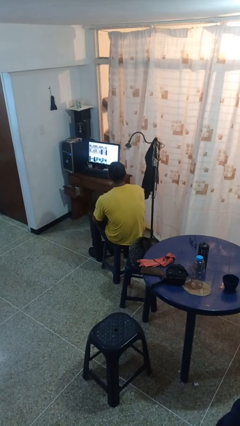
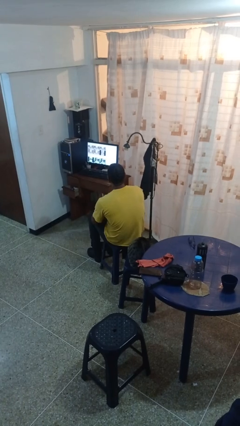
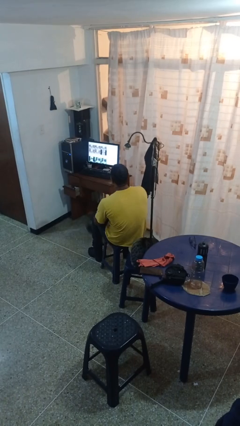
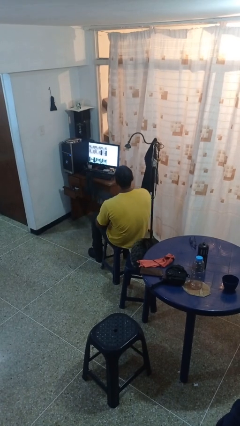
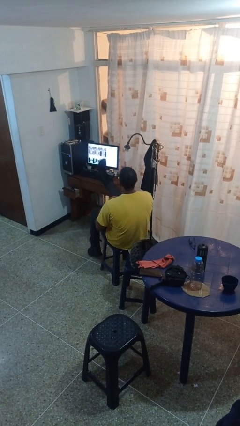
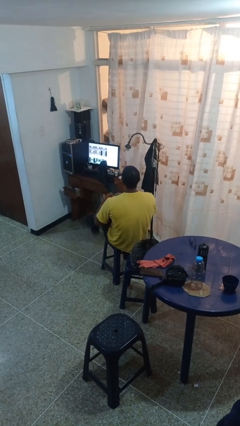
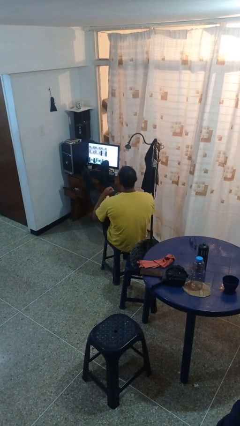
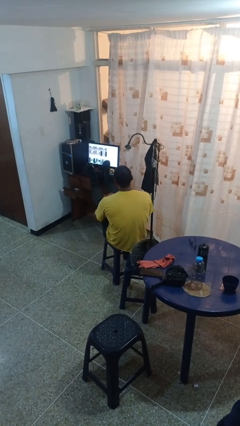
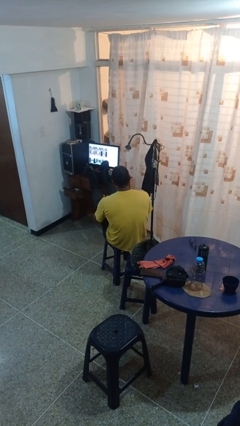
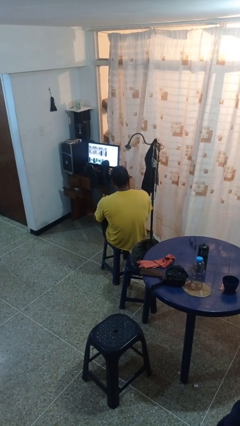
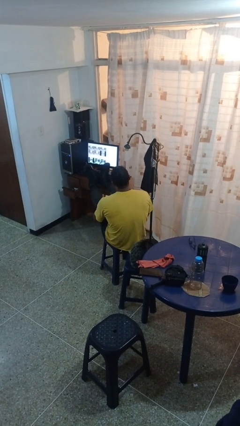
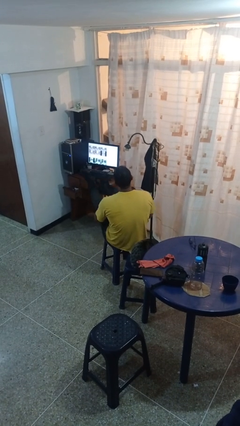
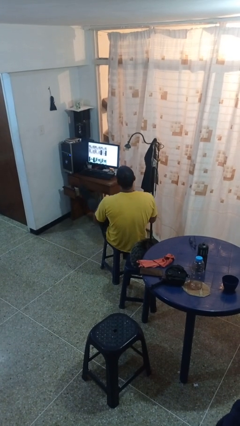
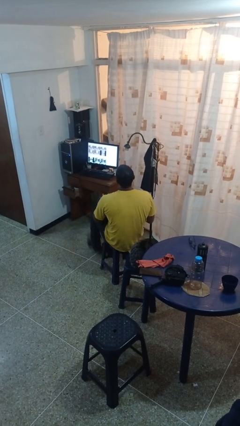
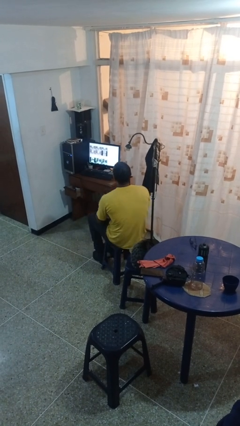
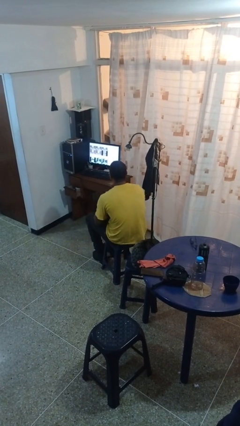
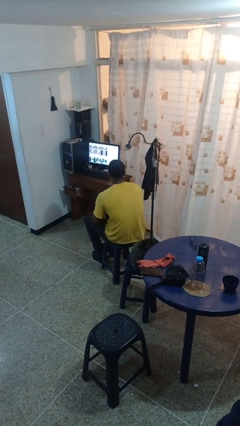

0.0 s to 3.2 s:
person puts feet up

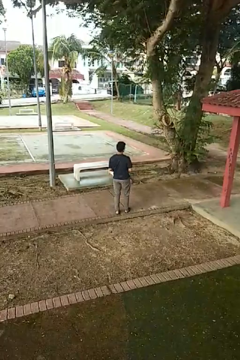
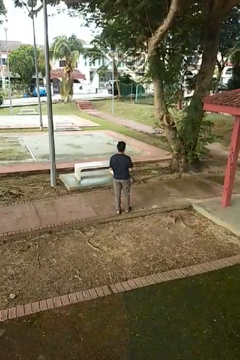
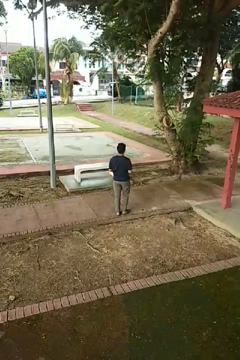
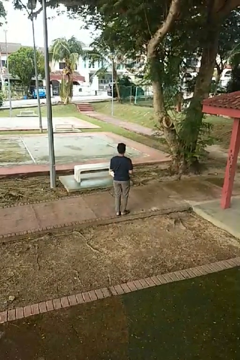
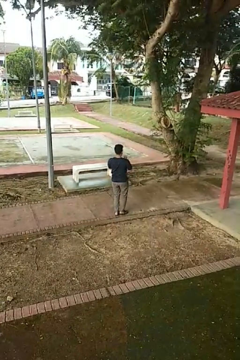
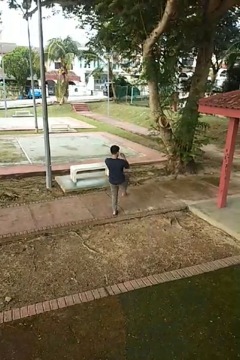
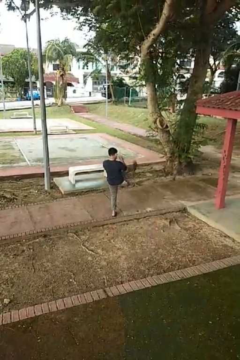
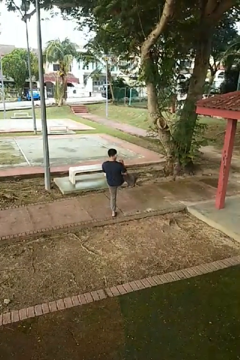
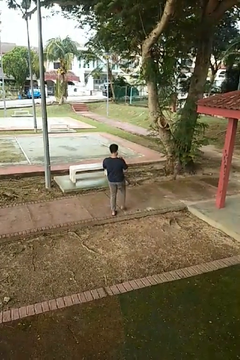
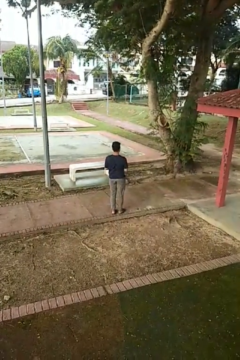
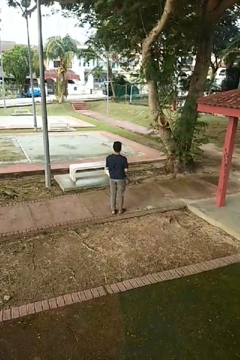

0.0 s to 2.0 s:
person karate kicks

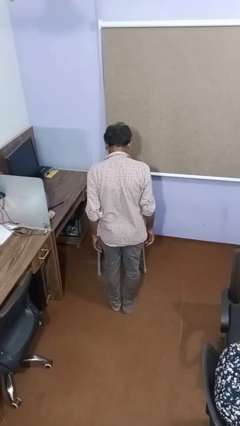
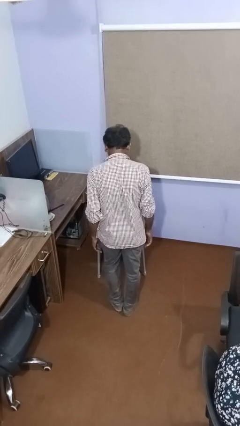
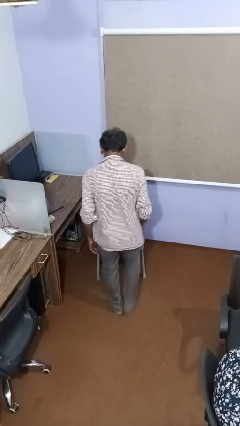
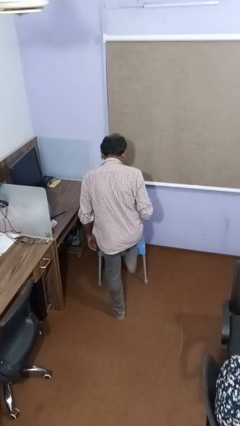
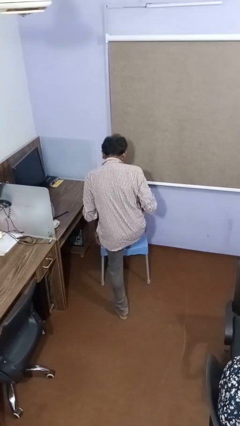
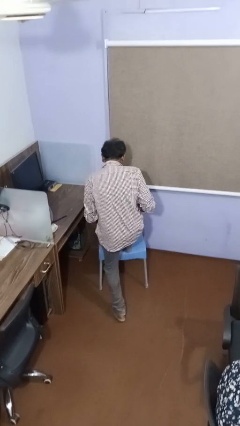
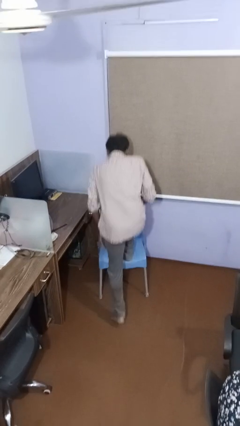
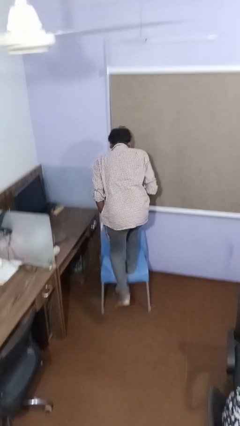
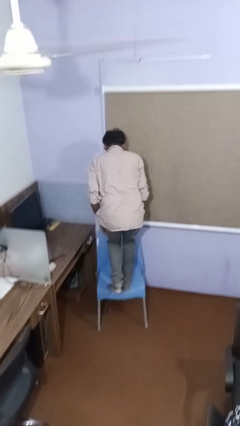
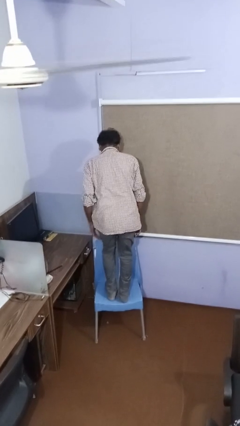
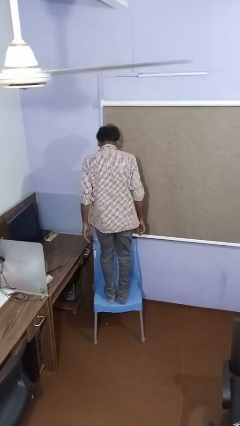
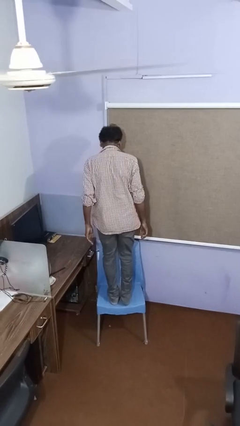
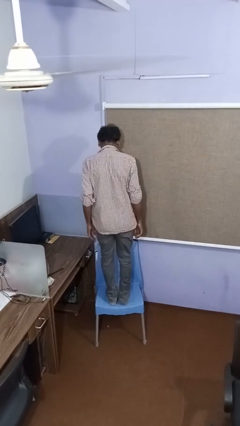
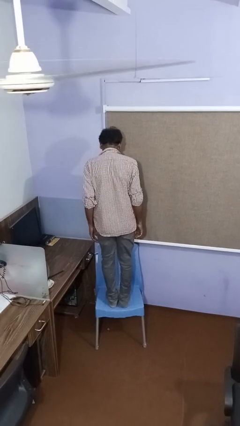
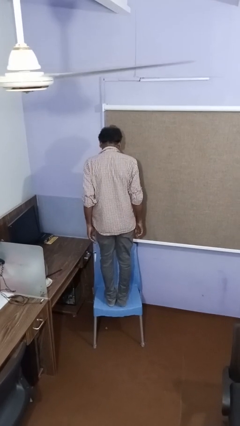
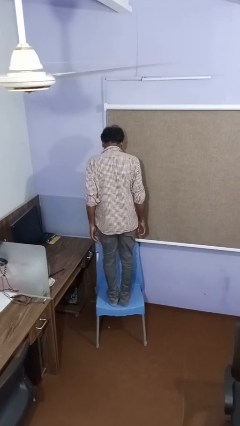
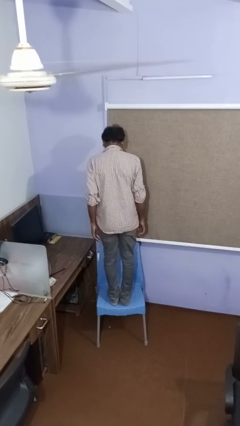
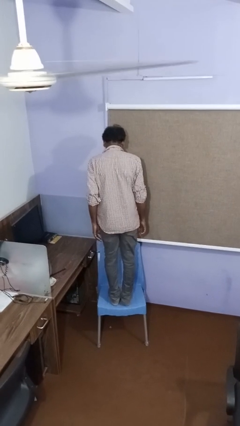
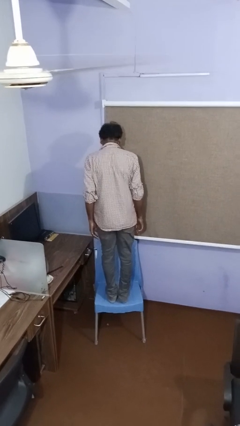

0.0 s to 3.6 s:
person climbs on chair

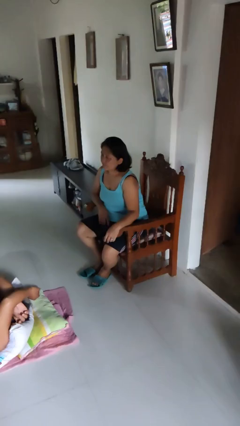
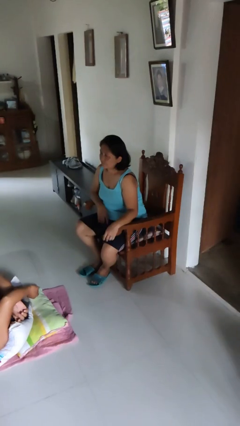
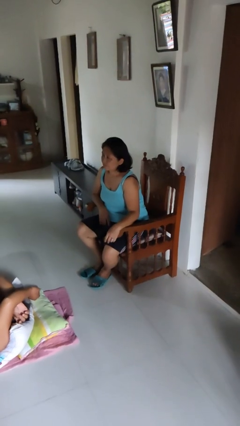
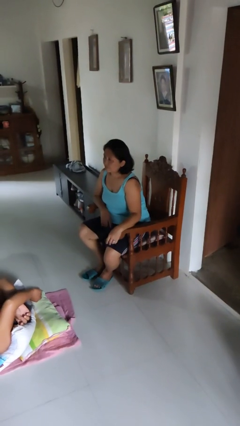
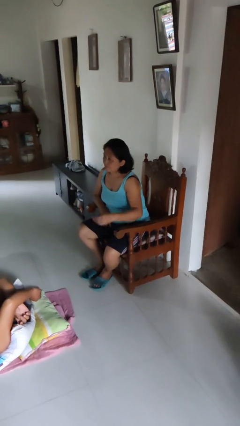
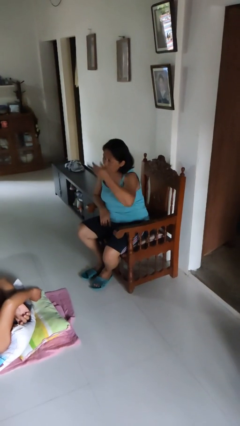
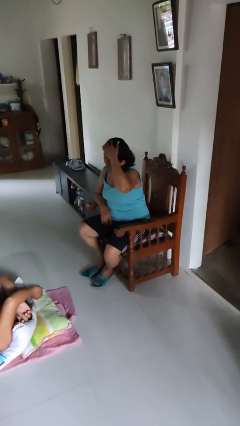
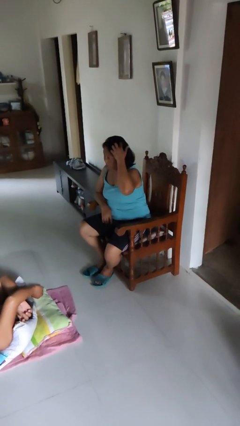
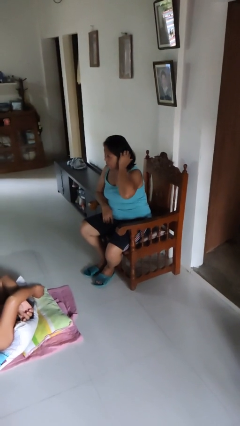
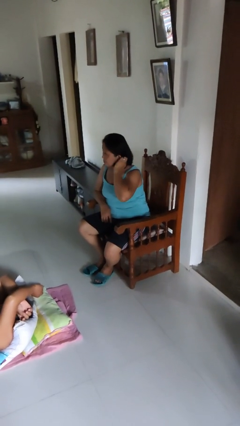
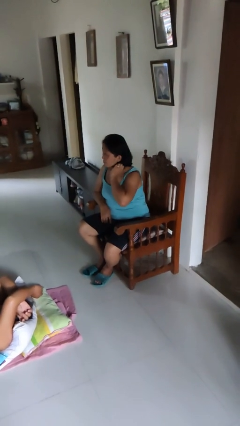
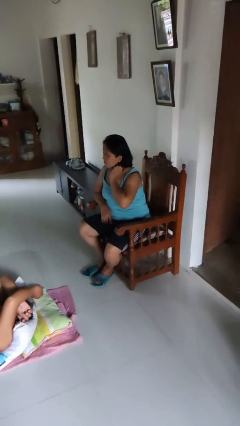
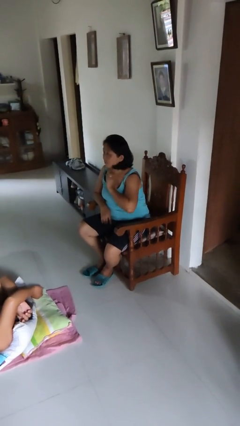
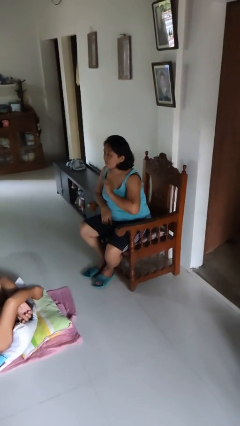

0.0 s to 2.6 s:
person strokes hair

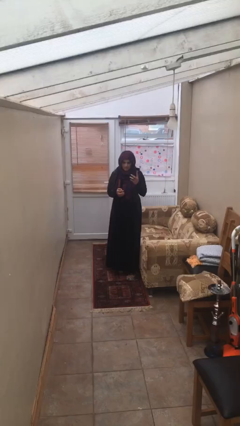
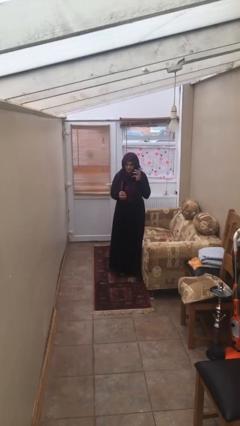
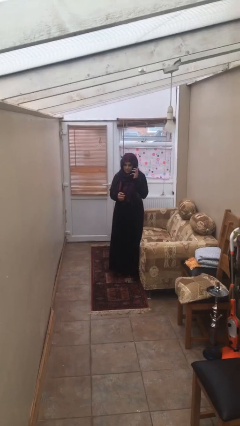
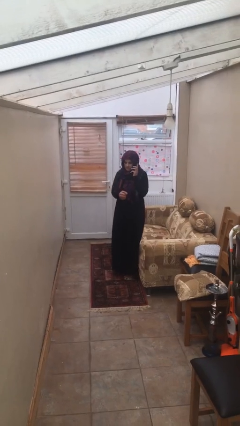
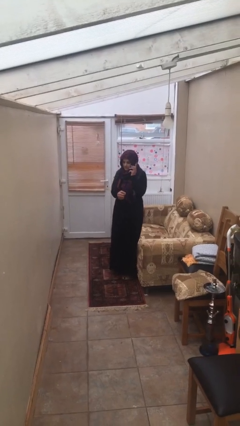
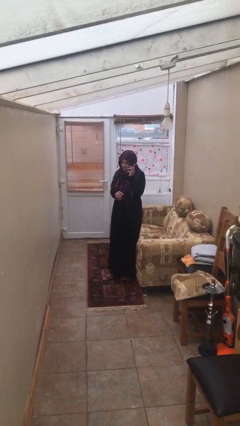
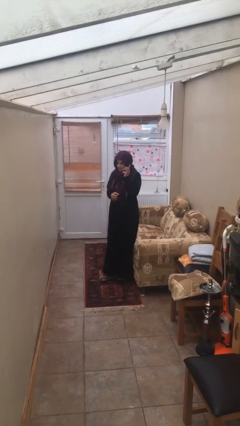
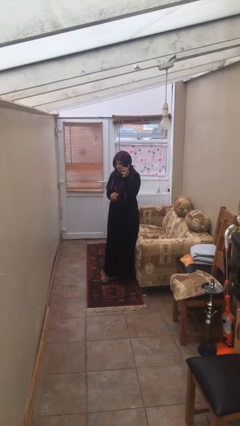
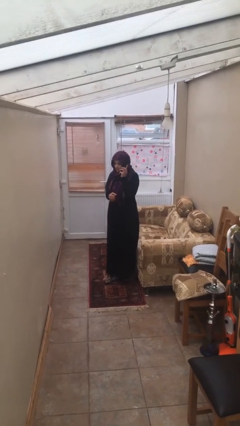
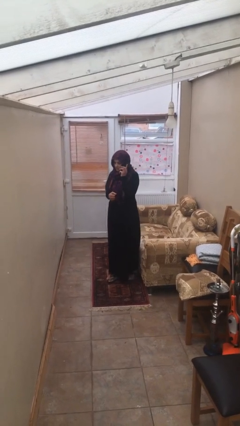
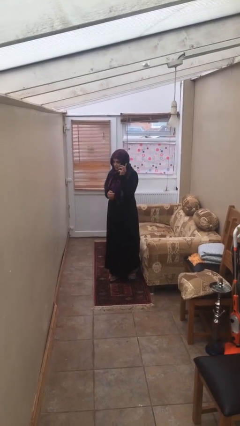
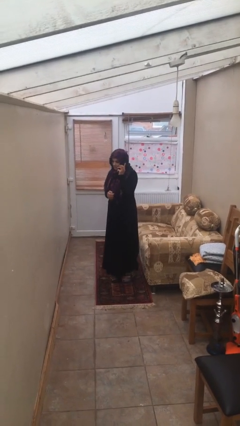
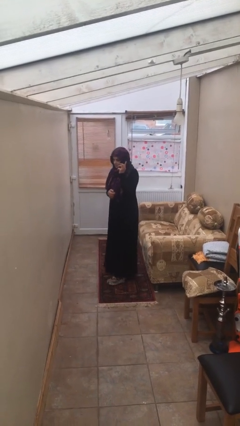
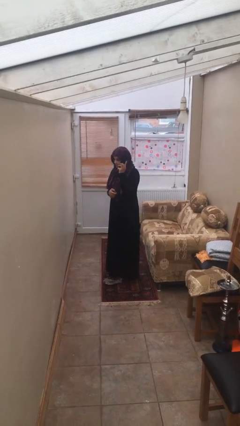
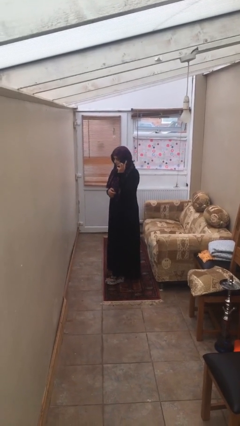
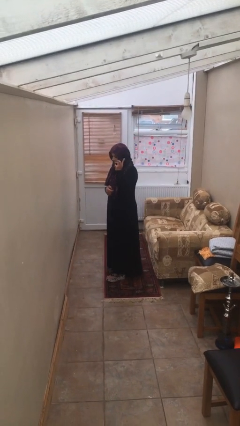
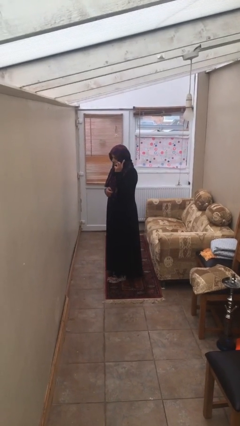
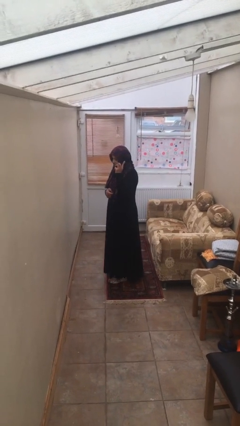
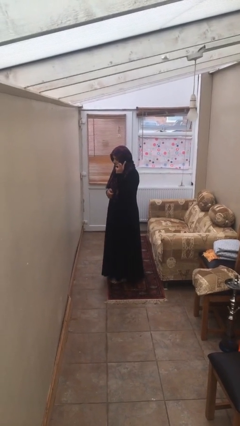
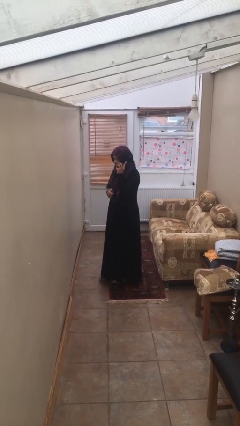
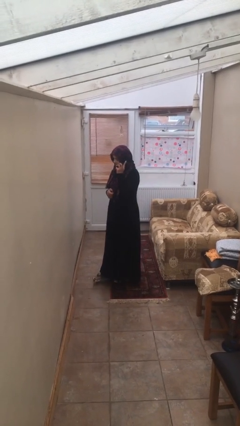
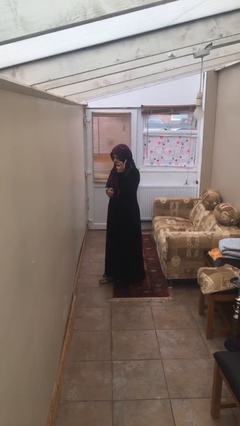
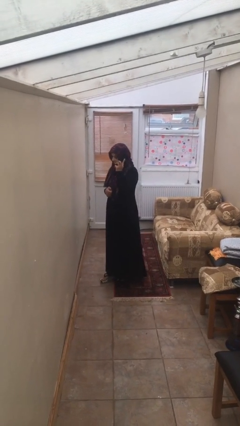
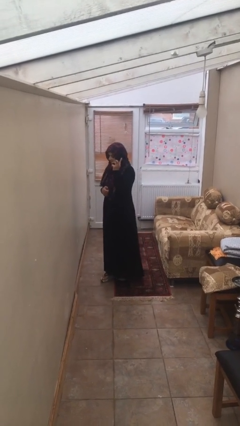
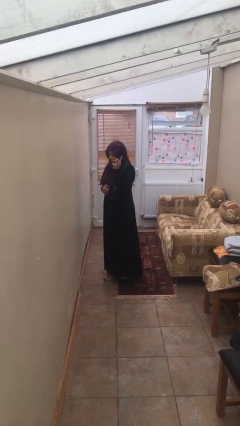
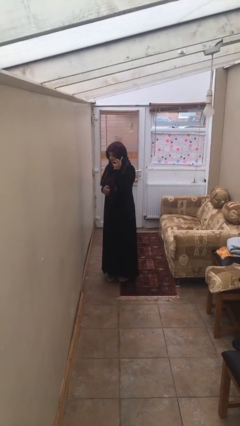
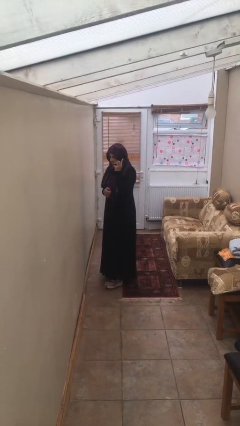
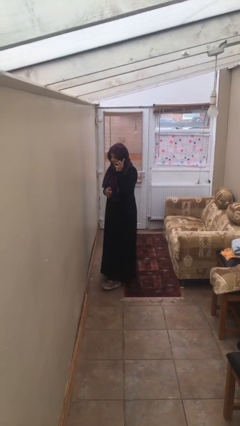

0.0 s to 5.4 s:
person talks on phone

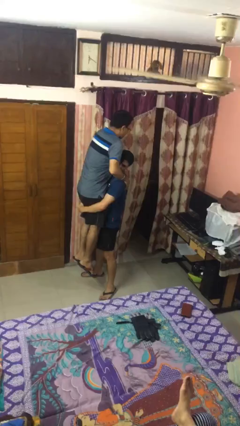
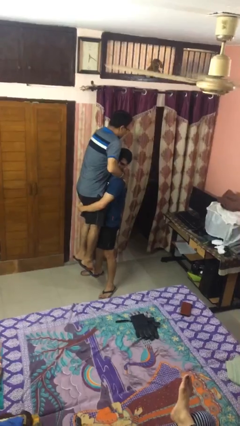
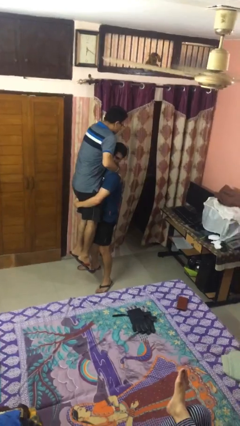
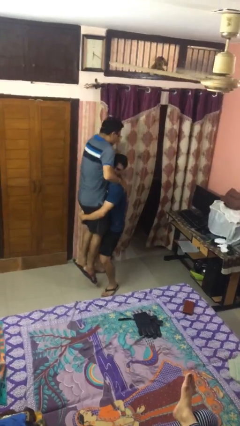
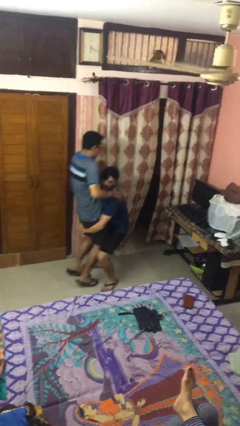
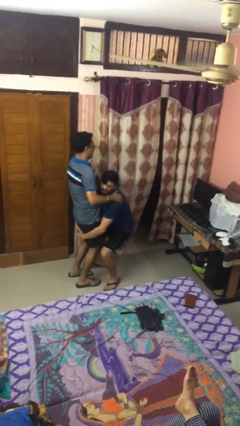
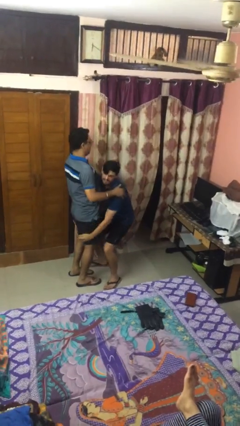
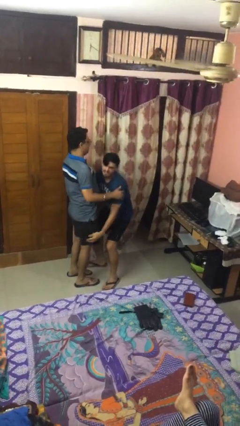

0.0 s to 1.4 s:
person puts down person
